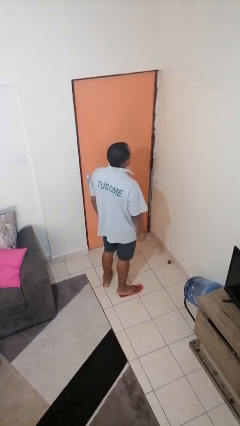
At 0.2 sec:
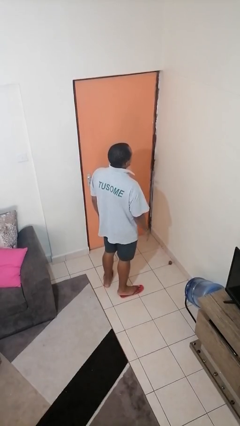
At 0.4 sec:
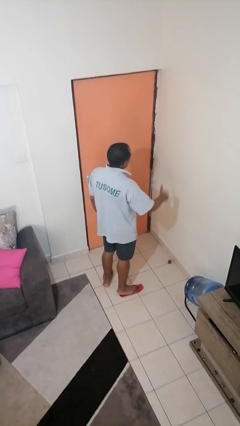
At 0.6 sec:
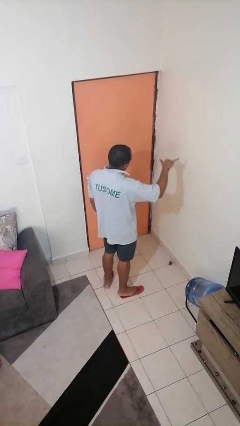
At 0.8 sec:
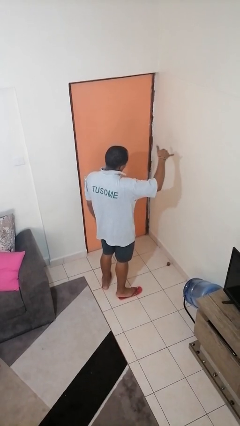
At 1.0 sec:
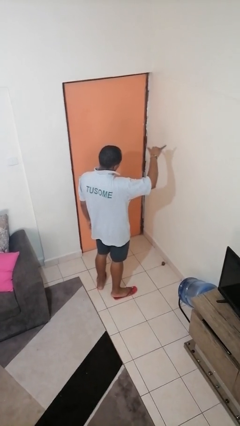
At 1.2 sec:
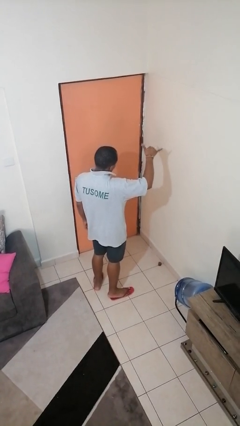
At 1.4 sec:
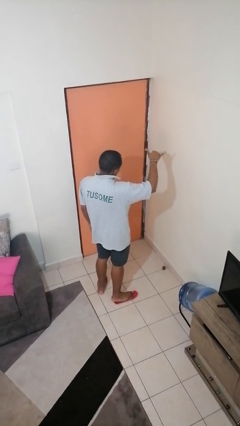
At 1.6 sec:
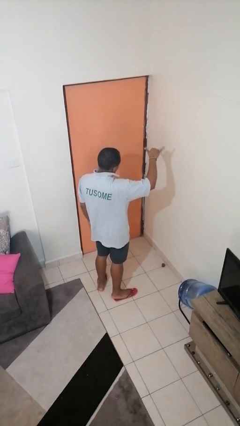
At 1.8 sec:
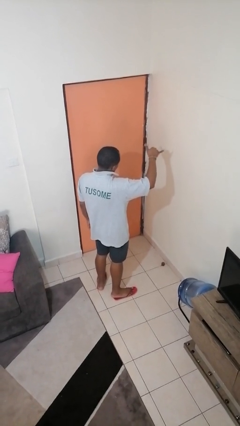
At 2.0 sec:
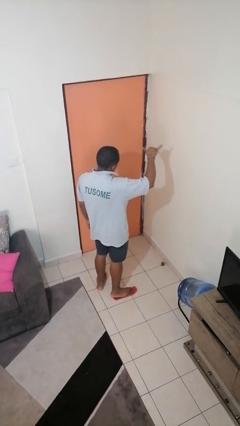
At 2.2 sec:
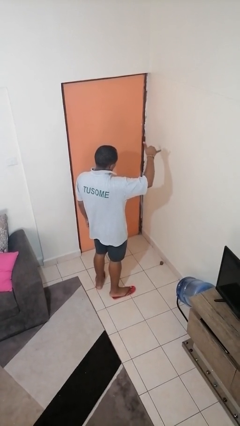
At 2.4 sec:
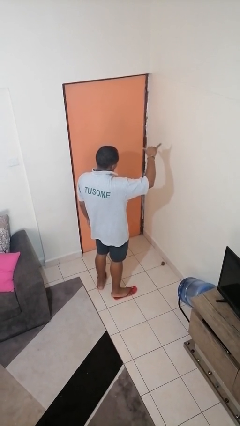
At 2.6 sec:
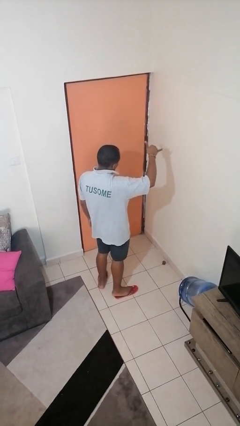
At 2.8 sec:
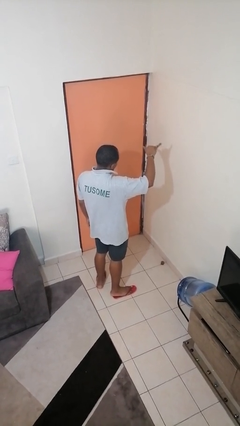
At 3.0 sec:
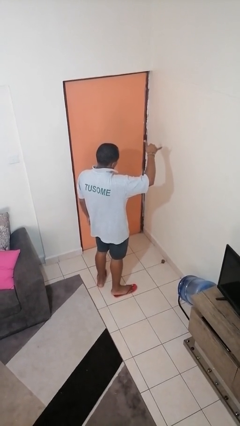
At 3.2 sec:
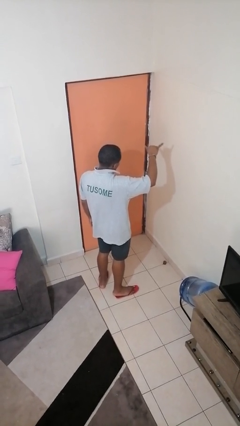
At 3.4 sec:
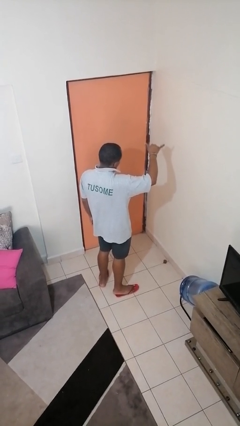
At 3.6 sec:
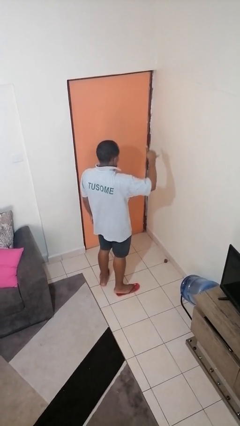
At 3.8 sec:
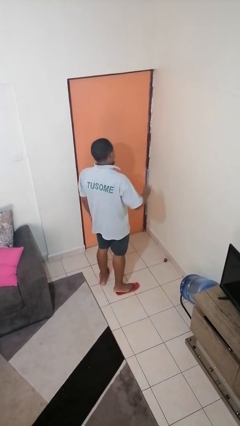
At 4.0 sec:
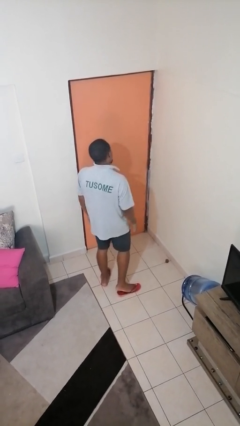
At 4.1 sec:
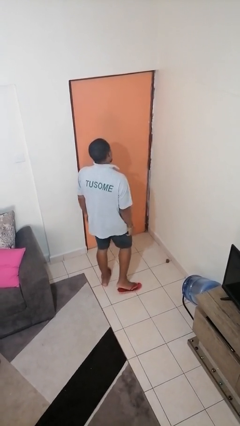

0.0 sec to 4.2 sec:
person gestures hang loose

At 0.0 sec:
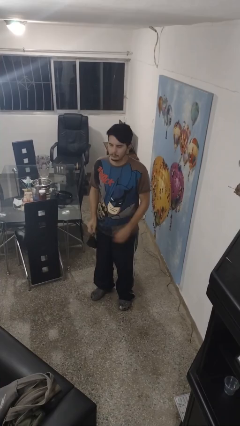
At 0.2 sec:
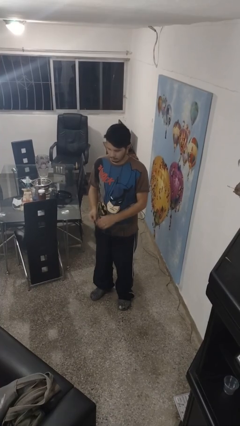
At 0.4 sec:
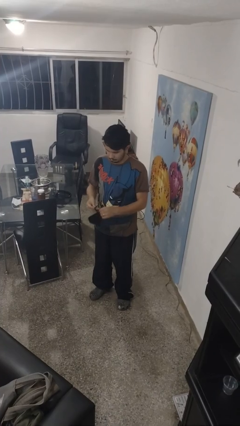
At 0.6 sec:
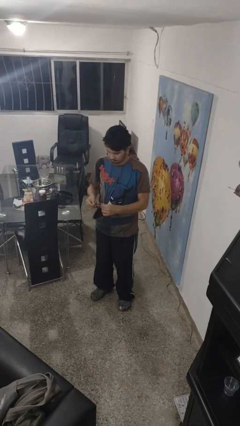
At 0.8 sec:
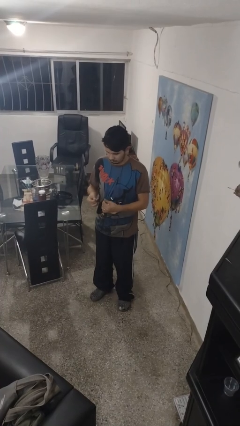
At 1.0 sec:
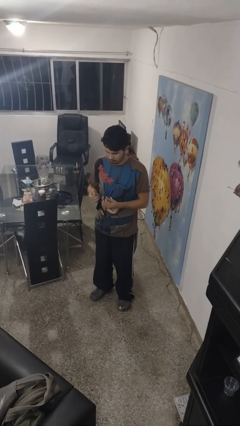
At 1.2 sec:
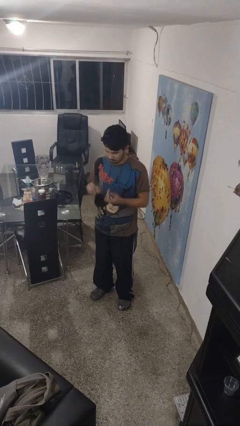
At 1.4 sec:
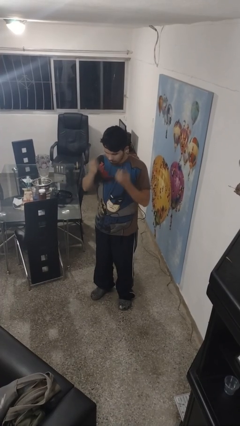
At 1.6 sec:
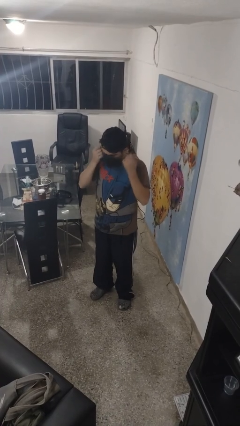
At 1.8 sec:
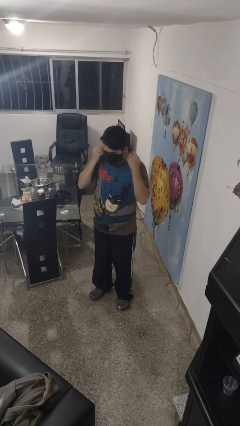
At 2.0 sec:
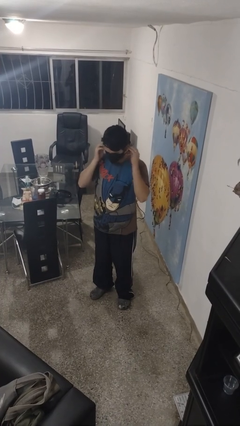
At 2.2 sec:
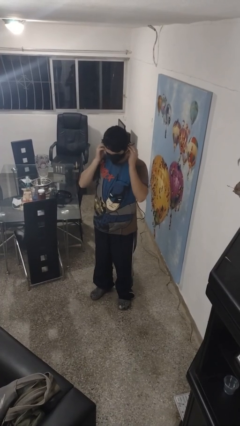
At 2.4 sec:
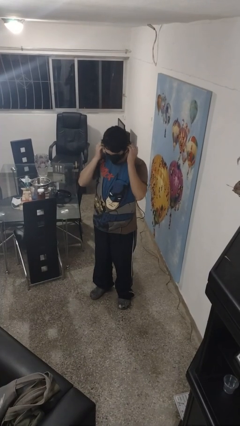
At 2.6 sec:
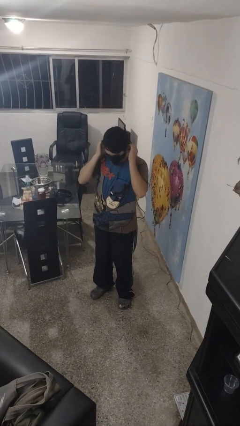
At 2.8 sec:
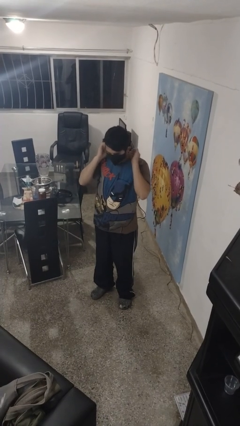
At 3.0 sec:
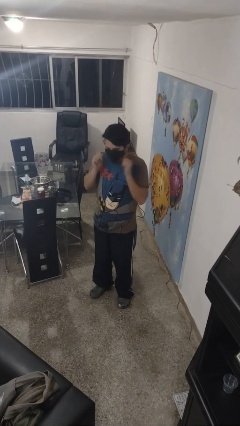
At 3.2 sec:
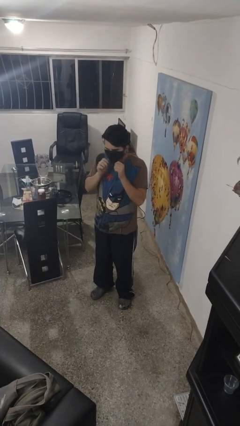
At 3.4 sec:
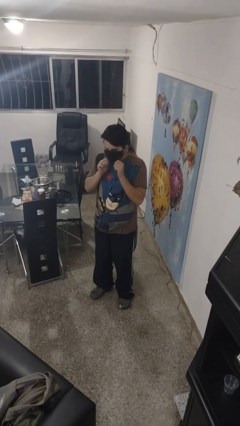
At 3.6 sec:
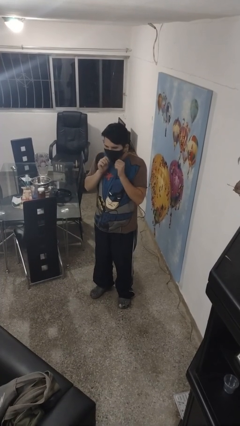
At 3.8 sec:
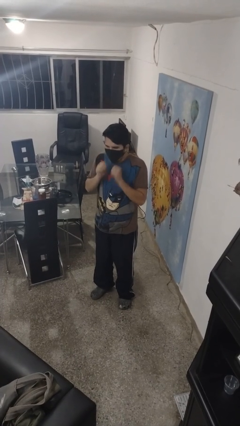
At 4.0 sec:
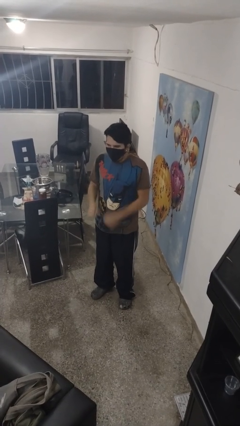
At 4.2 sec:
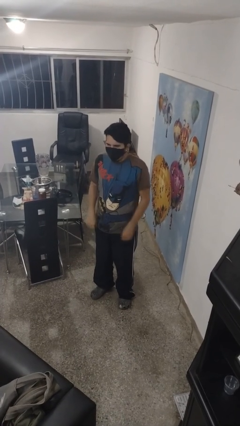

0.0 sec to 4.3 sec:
person puts on facemask

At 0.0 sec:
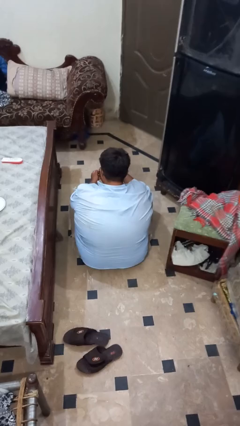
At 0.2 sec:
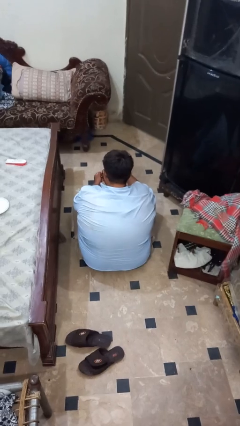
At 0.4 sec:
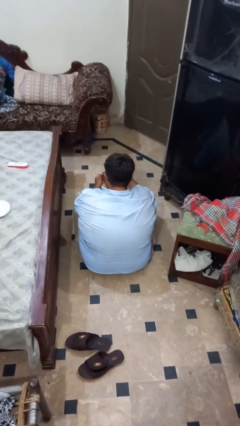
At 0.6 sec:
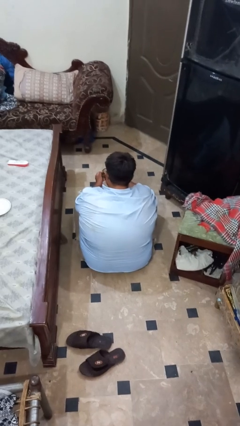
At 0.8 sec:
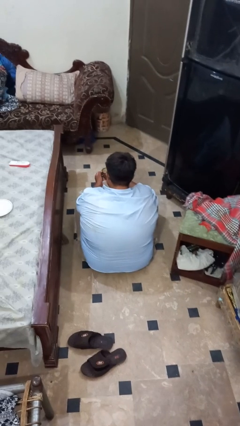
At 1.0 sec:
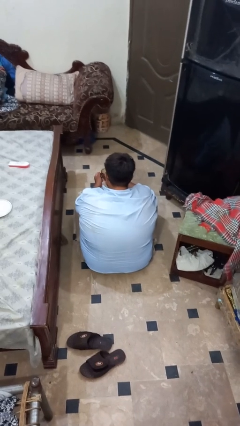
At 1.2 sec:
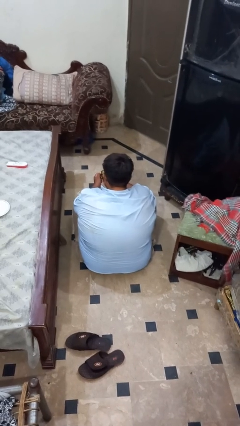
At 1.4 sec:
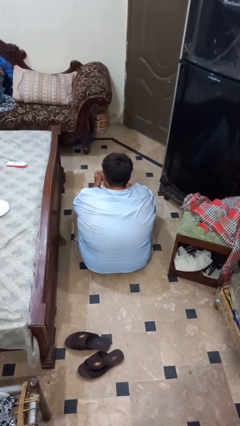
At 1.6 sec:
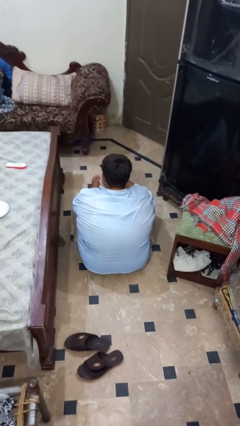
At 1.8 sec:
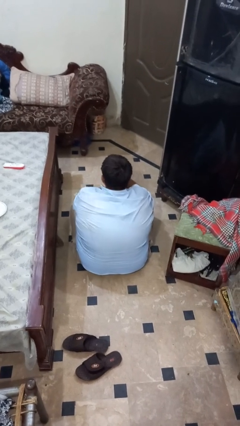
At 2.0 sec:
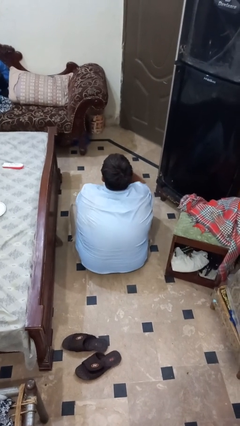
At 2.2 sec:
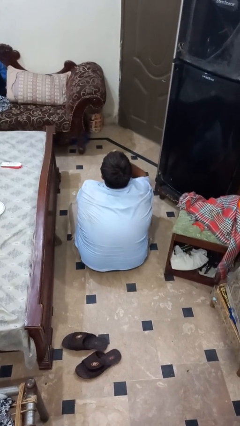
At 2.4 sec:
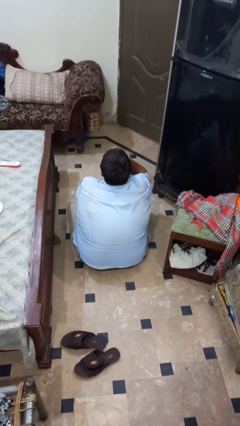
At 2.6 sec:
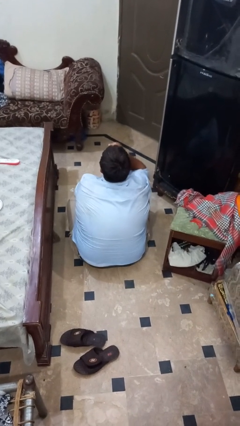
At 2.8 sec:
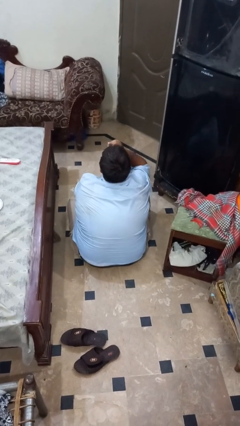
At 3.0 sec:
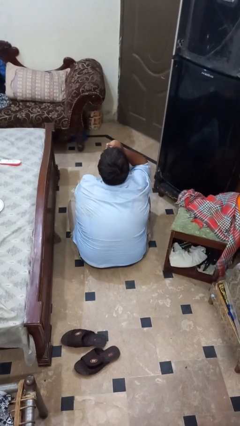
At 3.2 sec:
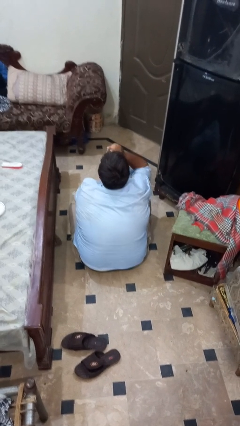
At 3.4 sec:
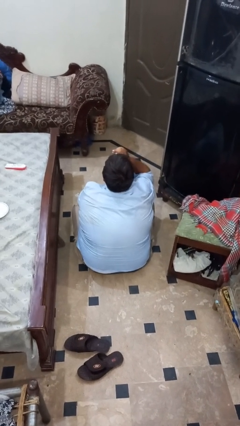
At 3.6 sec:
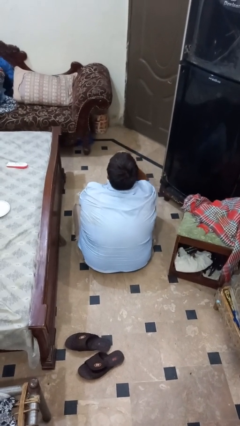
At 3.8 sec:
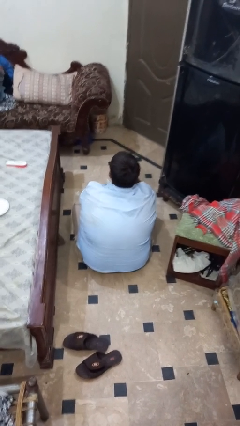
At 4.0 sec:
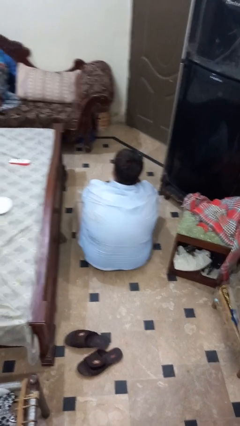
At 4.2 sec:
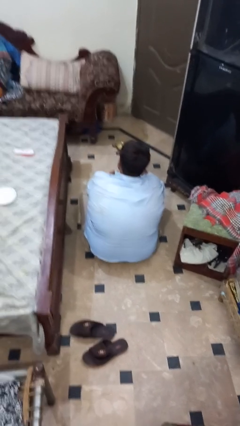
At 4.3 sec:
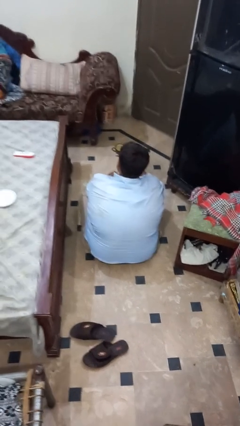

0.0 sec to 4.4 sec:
person drinks from mug

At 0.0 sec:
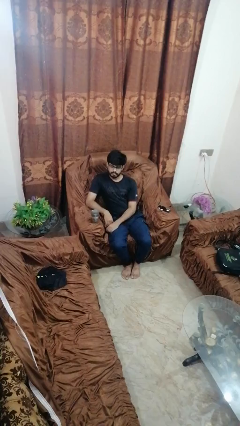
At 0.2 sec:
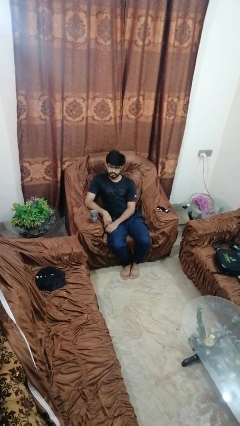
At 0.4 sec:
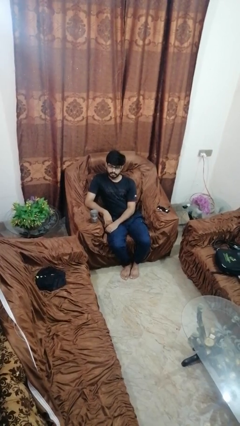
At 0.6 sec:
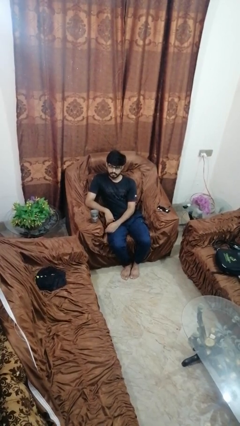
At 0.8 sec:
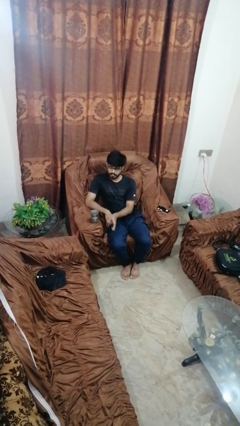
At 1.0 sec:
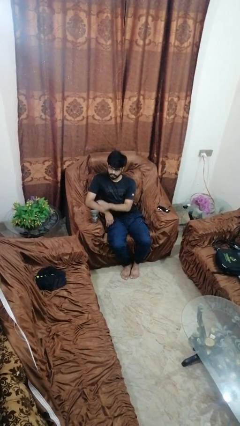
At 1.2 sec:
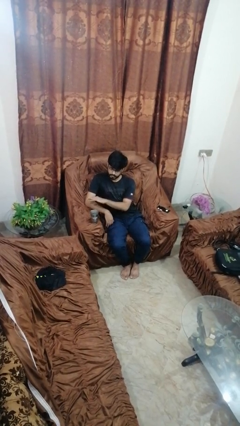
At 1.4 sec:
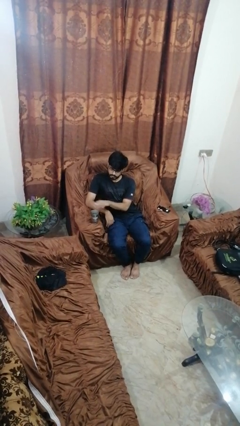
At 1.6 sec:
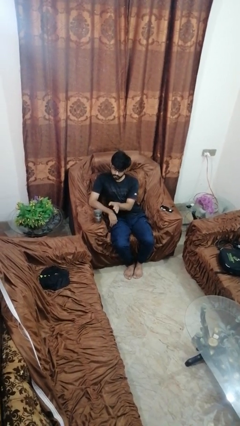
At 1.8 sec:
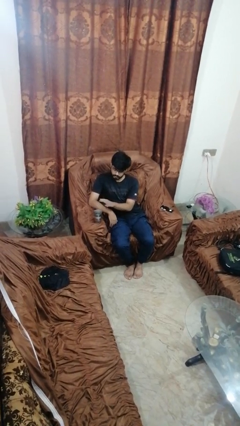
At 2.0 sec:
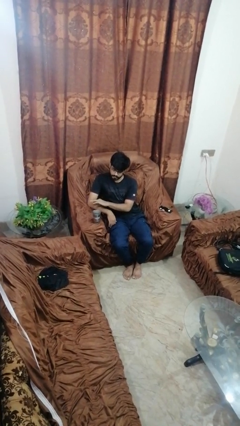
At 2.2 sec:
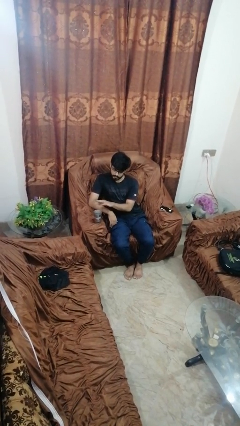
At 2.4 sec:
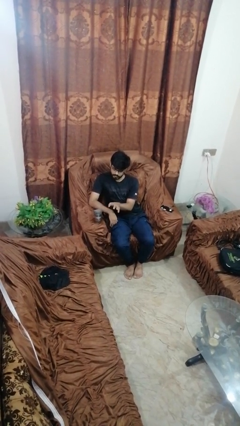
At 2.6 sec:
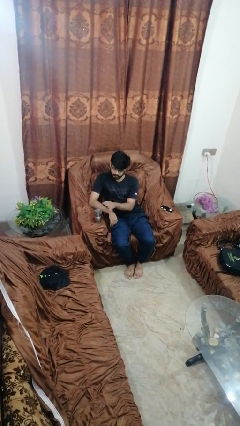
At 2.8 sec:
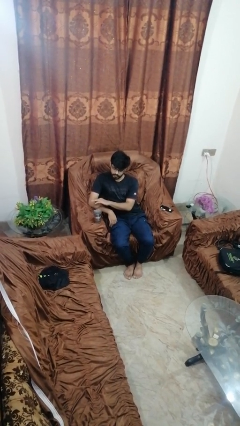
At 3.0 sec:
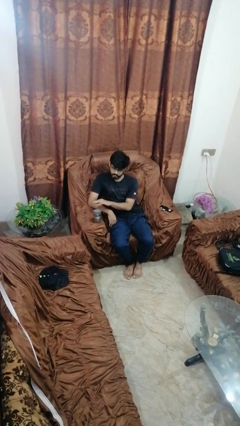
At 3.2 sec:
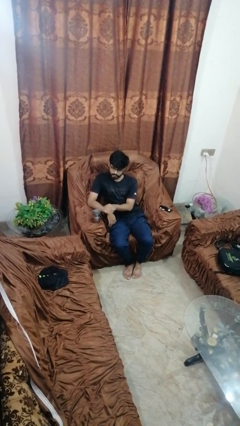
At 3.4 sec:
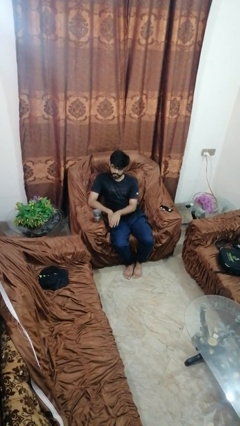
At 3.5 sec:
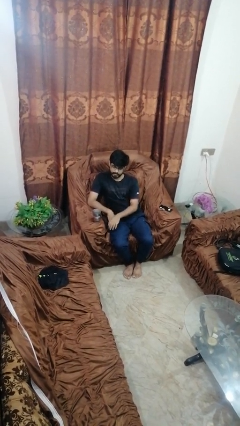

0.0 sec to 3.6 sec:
person waves hand over object

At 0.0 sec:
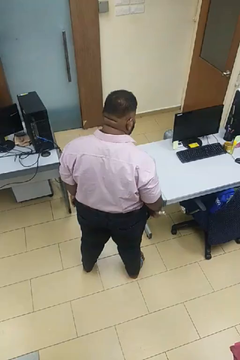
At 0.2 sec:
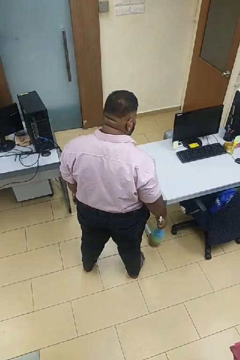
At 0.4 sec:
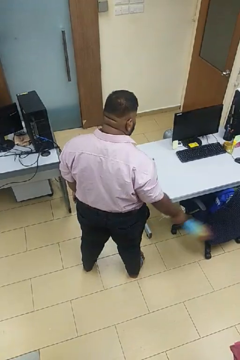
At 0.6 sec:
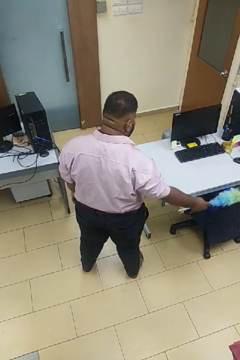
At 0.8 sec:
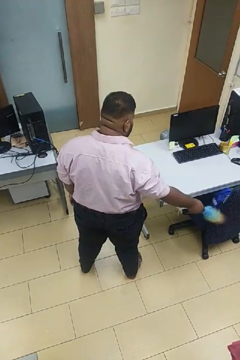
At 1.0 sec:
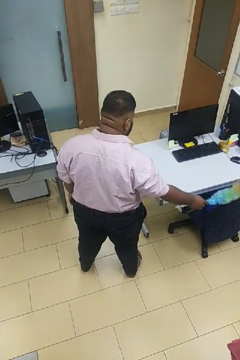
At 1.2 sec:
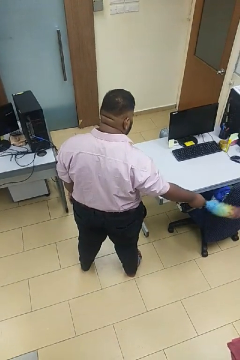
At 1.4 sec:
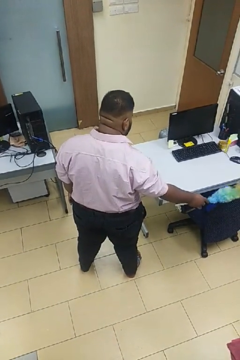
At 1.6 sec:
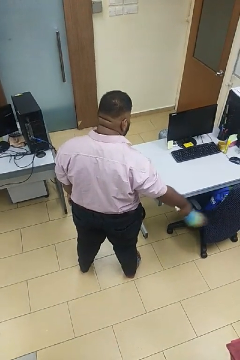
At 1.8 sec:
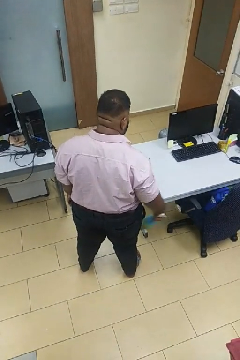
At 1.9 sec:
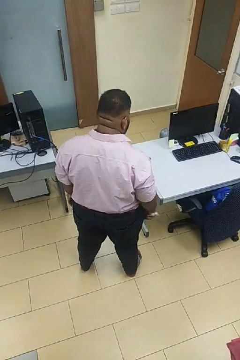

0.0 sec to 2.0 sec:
person dusts furniture
